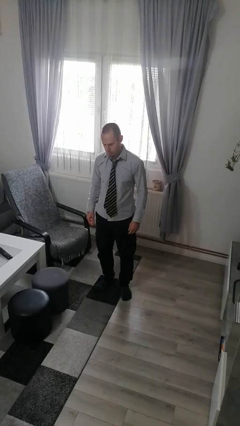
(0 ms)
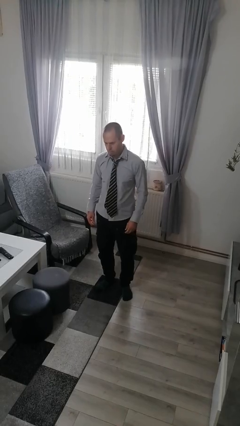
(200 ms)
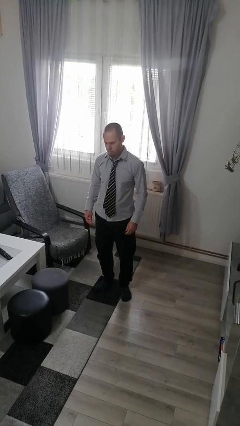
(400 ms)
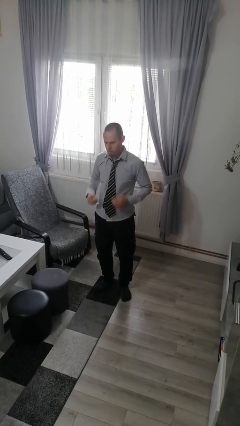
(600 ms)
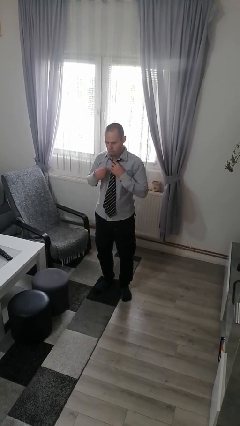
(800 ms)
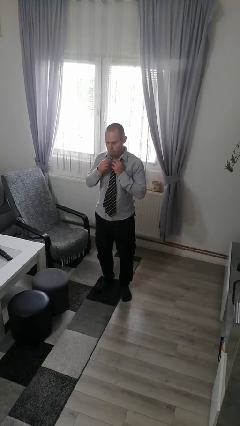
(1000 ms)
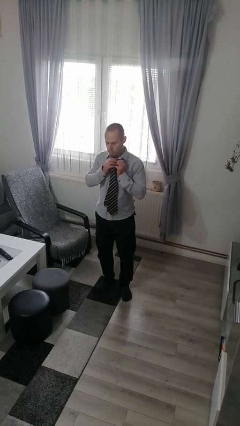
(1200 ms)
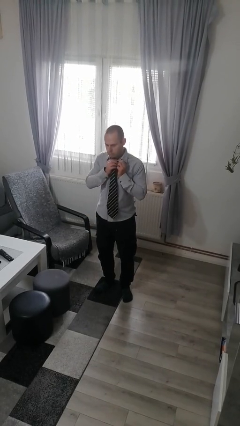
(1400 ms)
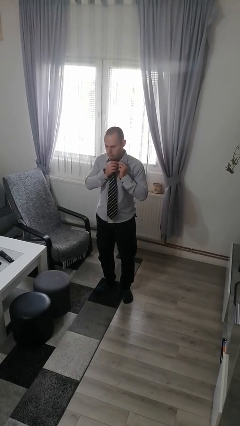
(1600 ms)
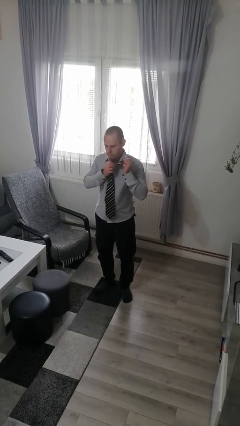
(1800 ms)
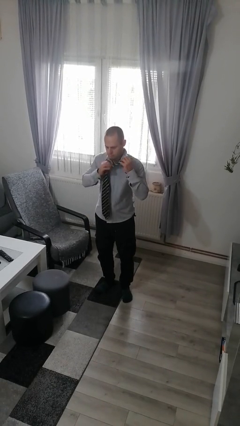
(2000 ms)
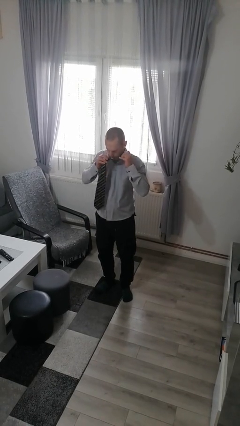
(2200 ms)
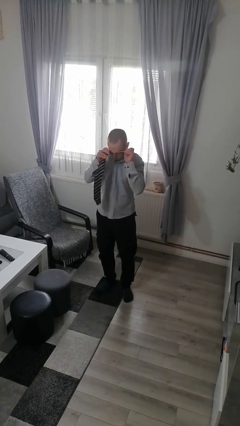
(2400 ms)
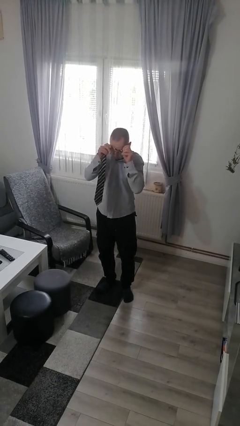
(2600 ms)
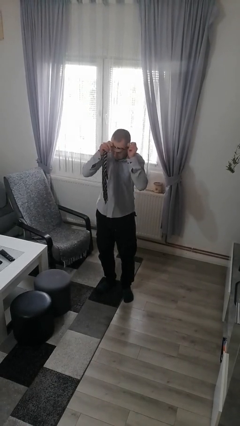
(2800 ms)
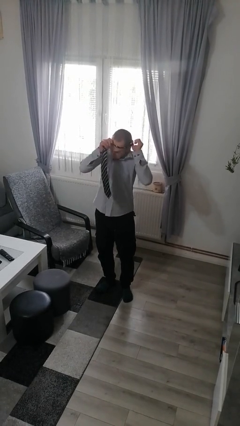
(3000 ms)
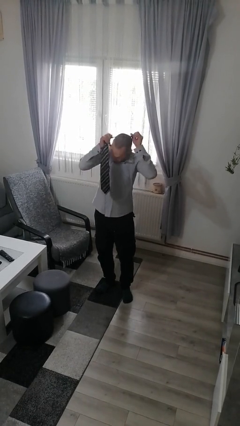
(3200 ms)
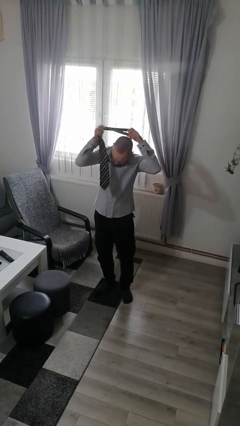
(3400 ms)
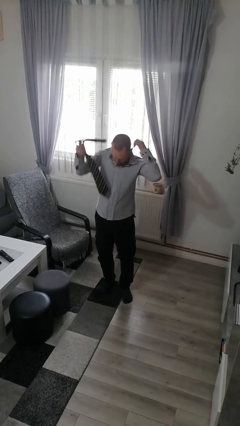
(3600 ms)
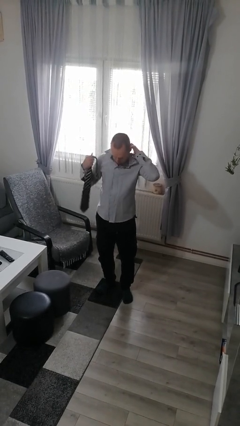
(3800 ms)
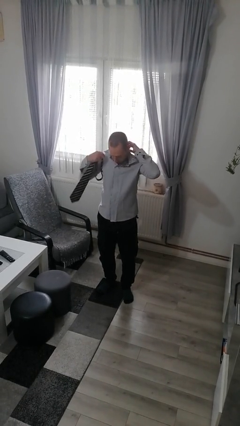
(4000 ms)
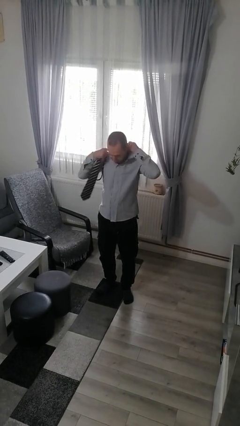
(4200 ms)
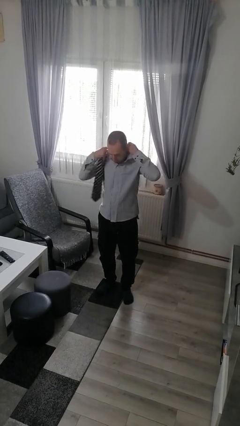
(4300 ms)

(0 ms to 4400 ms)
person takes off necktie

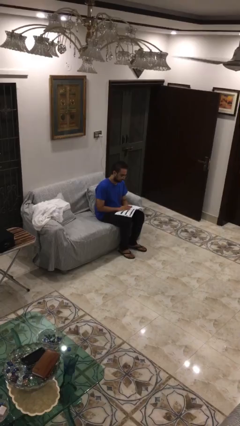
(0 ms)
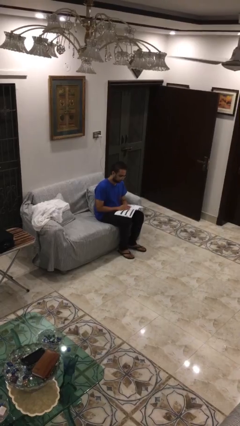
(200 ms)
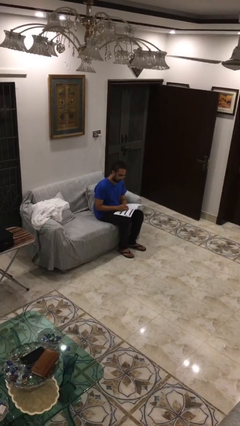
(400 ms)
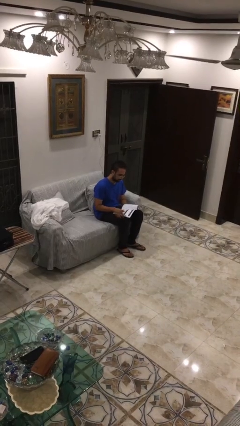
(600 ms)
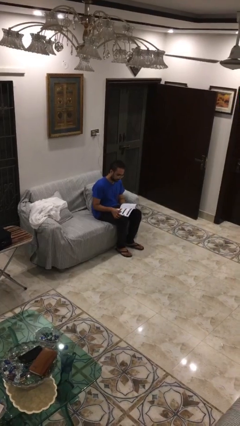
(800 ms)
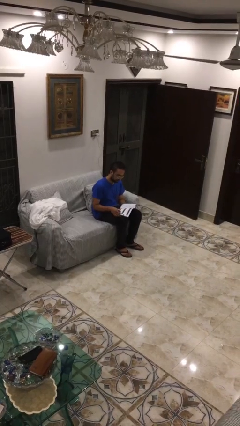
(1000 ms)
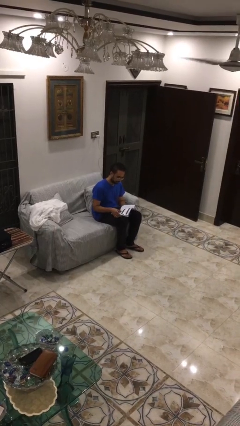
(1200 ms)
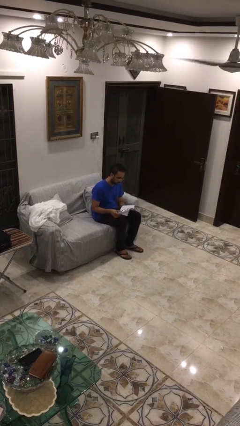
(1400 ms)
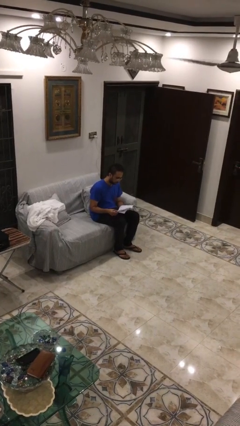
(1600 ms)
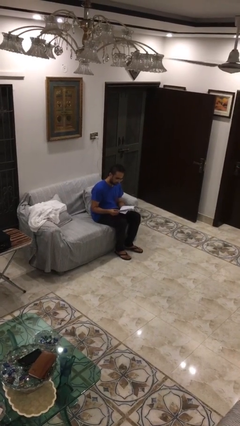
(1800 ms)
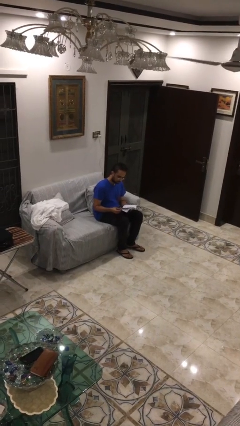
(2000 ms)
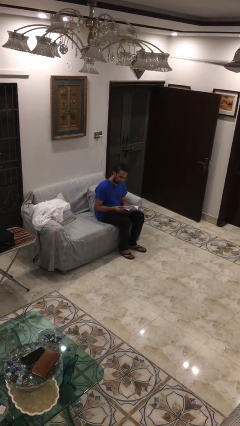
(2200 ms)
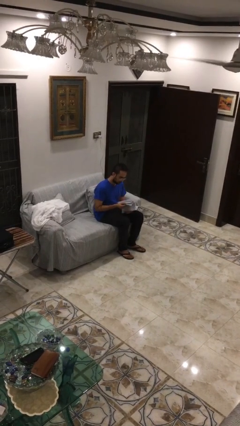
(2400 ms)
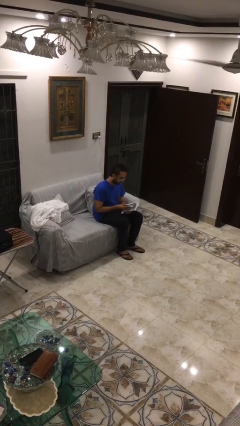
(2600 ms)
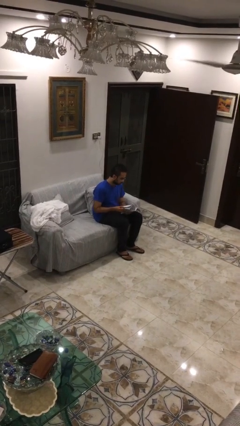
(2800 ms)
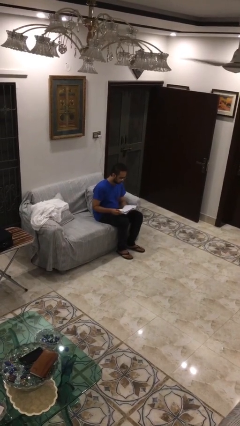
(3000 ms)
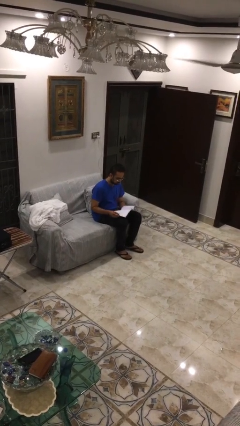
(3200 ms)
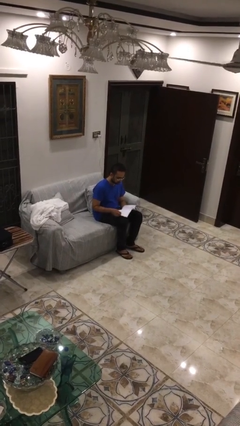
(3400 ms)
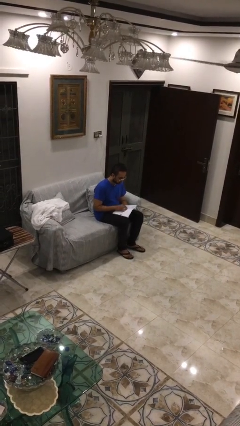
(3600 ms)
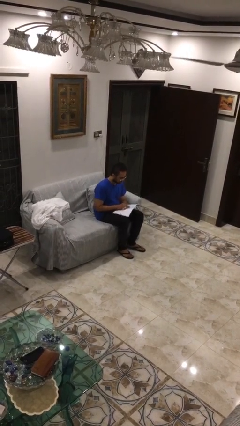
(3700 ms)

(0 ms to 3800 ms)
person reads document

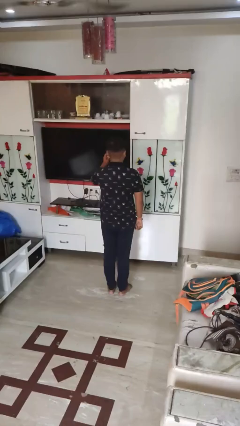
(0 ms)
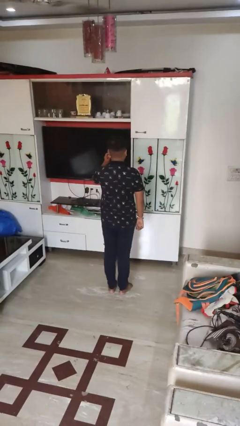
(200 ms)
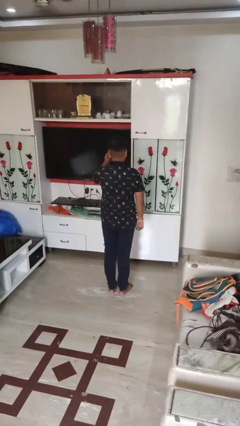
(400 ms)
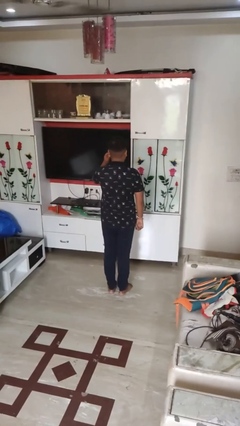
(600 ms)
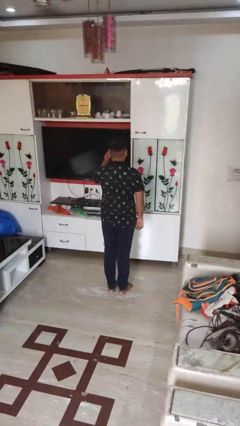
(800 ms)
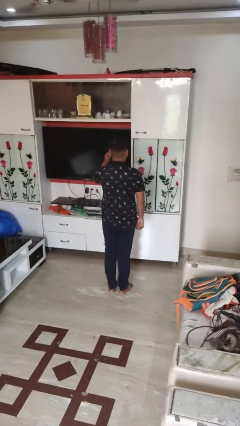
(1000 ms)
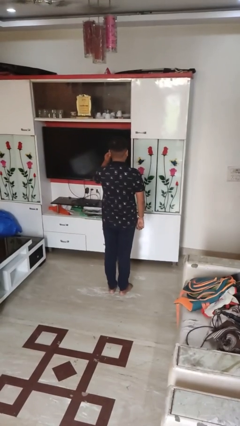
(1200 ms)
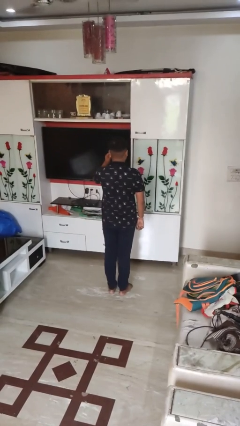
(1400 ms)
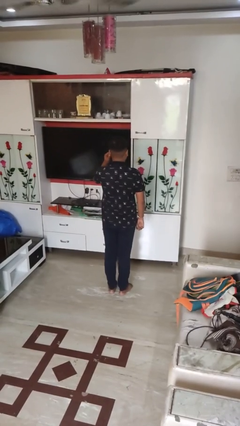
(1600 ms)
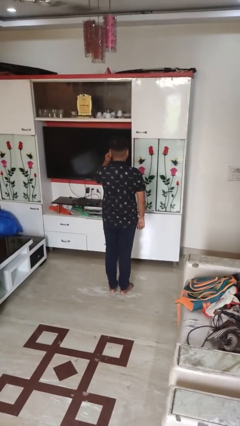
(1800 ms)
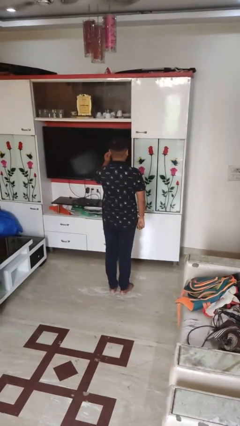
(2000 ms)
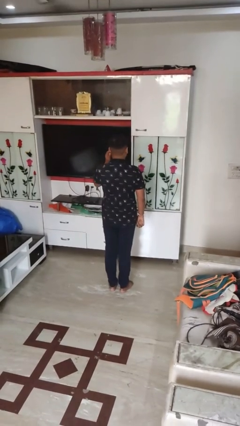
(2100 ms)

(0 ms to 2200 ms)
person gestures listen closely

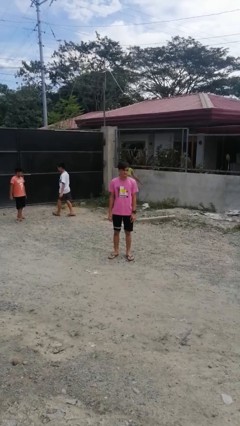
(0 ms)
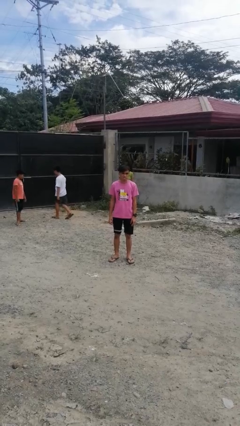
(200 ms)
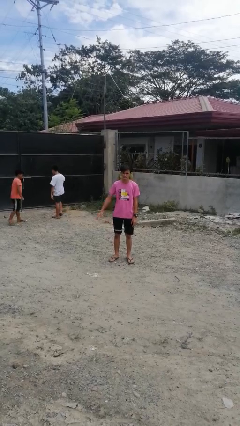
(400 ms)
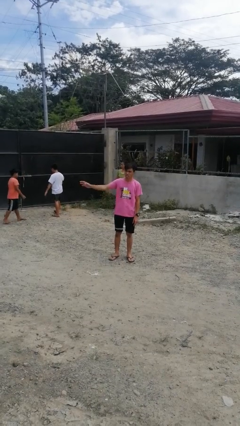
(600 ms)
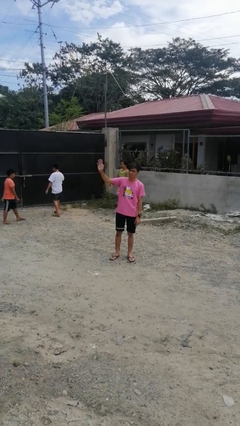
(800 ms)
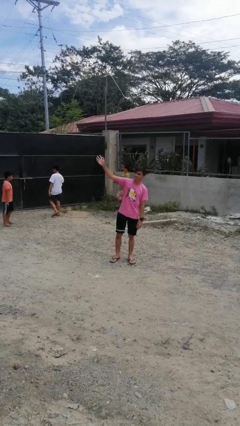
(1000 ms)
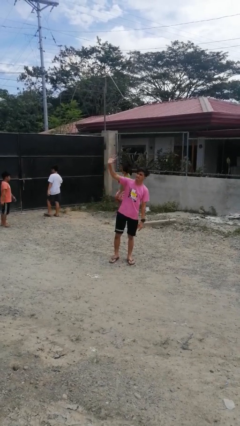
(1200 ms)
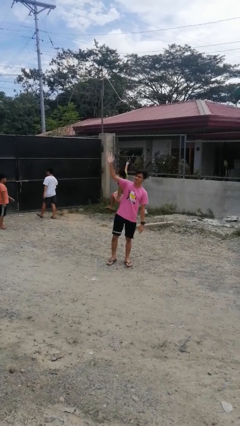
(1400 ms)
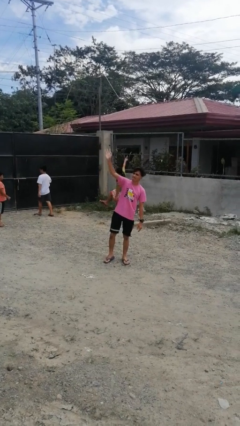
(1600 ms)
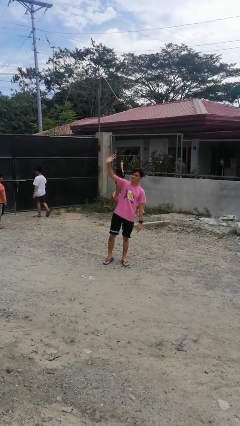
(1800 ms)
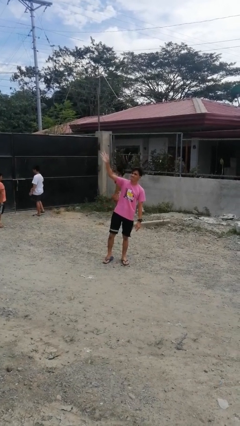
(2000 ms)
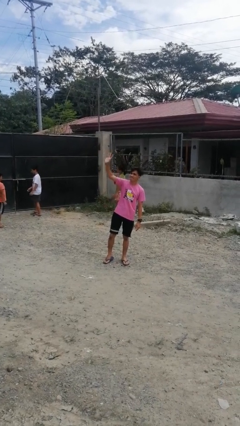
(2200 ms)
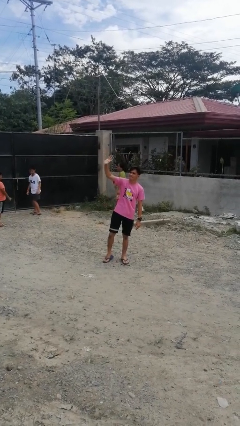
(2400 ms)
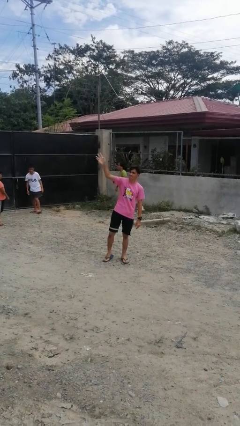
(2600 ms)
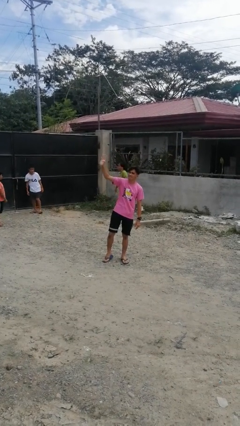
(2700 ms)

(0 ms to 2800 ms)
person waves at person

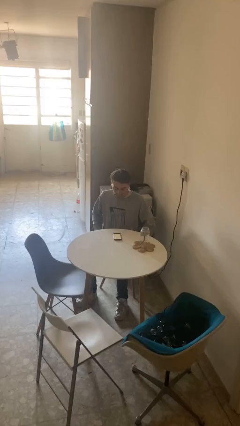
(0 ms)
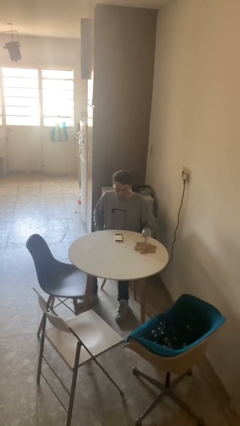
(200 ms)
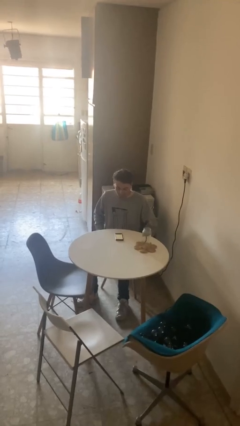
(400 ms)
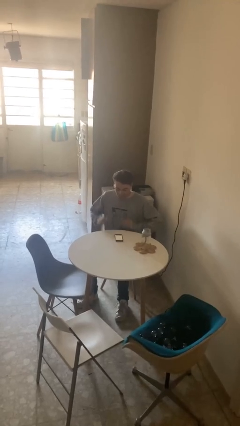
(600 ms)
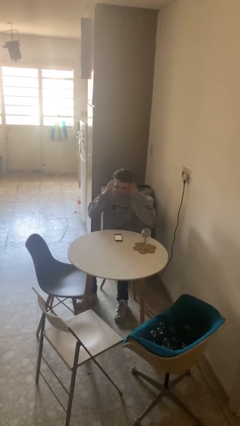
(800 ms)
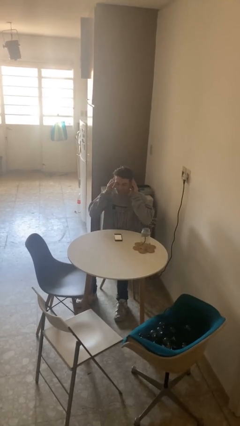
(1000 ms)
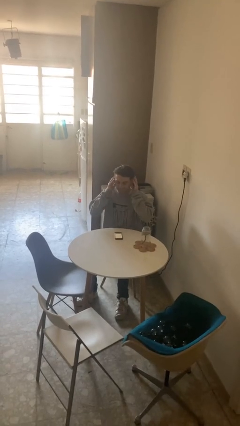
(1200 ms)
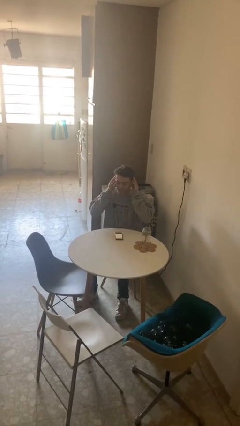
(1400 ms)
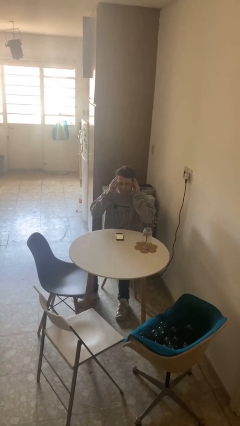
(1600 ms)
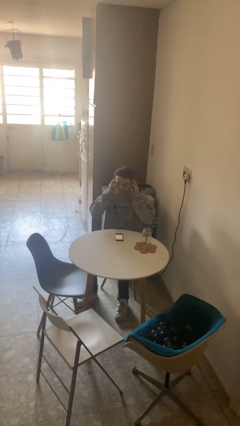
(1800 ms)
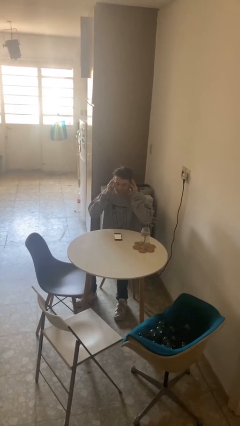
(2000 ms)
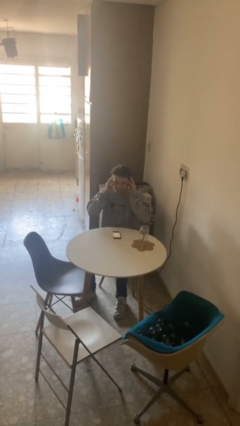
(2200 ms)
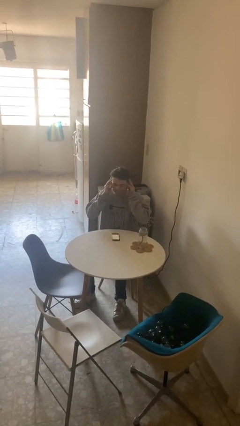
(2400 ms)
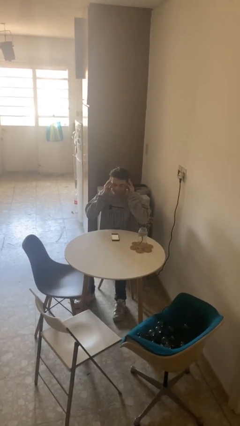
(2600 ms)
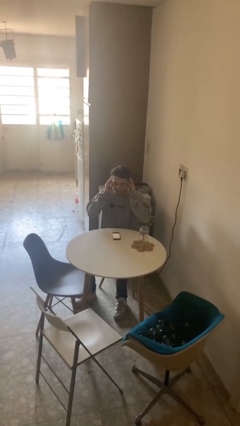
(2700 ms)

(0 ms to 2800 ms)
person puts fingers in ear

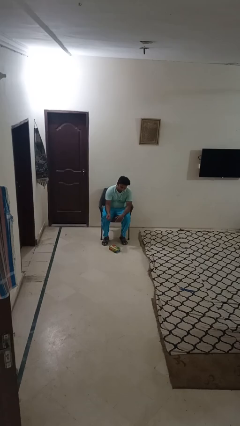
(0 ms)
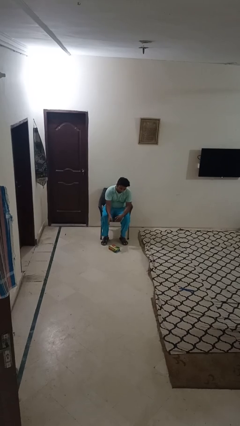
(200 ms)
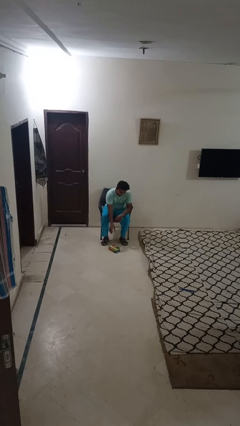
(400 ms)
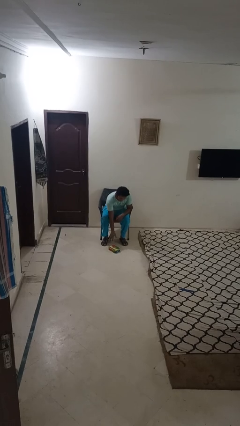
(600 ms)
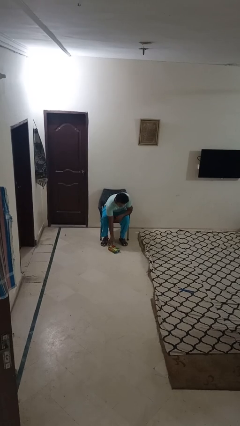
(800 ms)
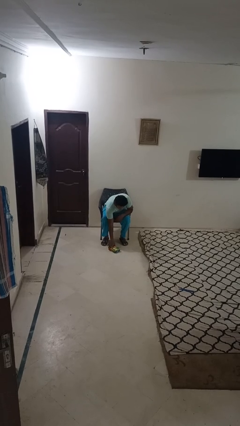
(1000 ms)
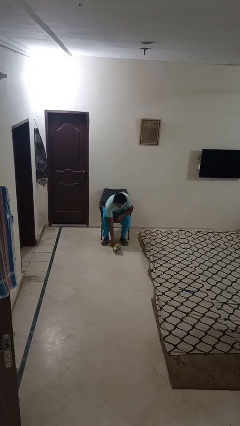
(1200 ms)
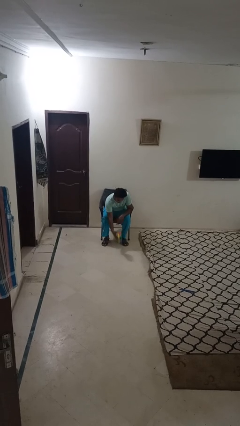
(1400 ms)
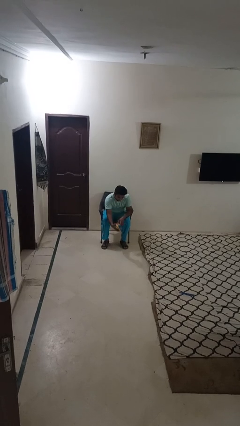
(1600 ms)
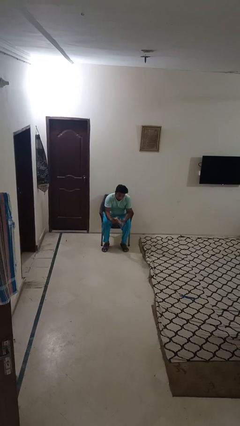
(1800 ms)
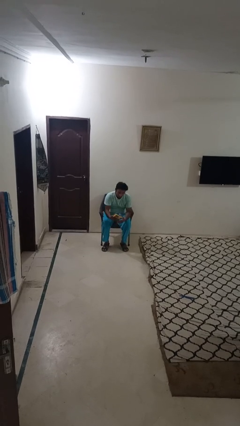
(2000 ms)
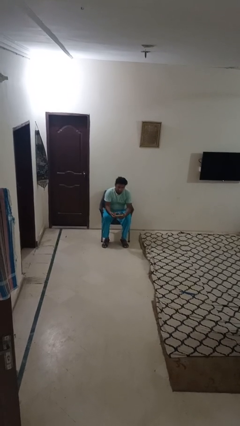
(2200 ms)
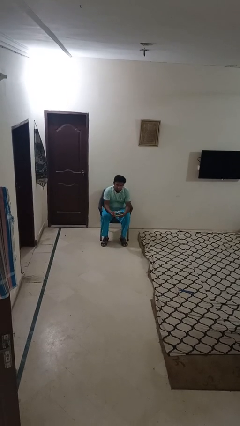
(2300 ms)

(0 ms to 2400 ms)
person picks up object from floor
